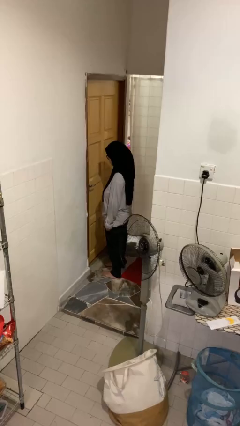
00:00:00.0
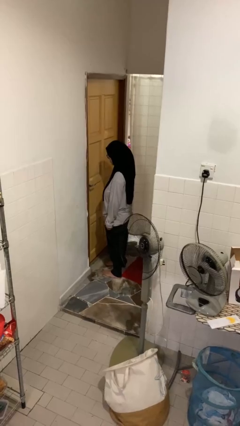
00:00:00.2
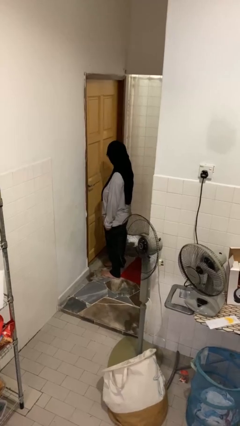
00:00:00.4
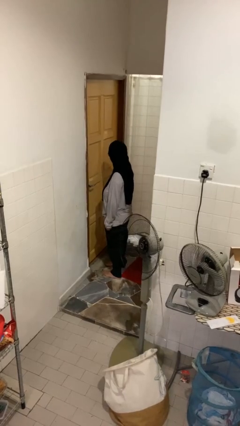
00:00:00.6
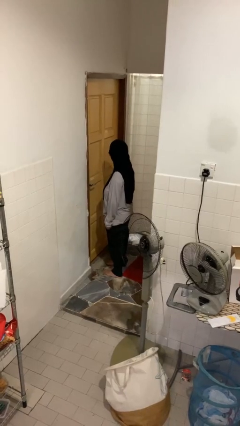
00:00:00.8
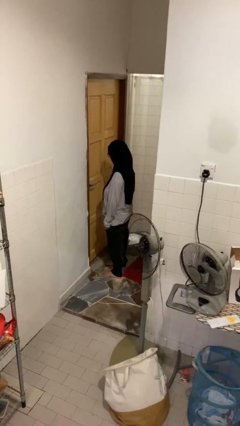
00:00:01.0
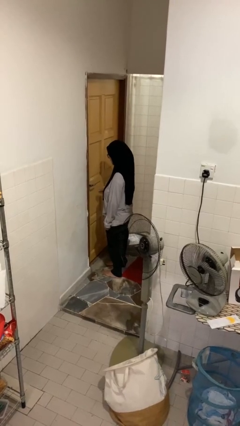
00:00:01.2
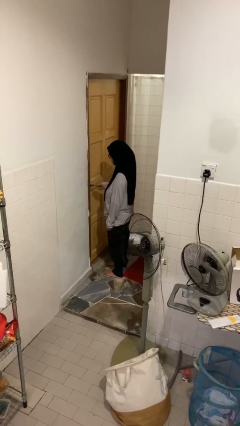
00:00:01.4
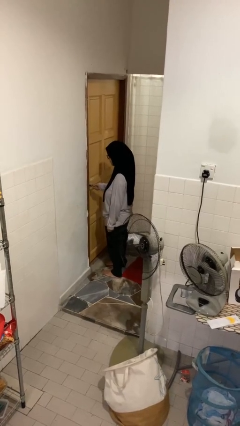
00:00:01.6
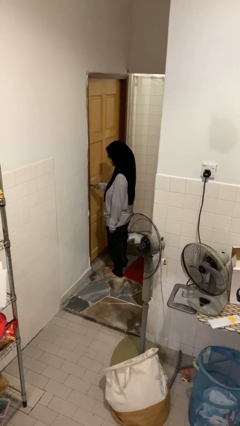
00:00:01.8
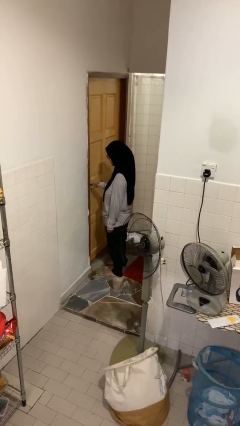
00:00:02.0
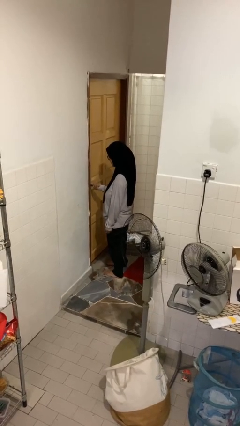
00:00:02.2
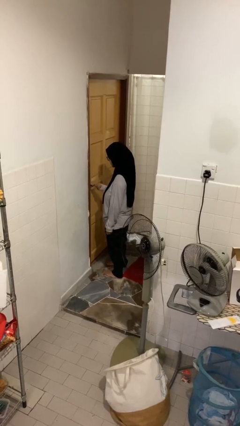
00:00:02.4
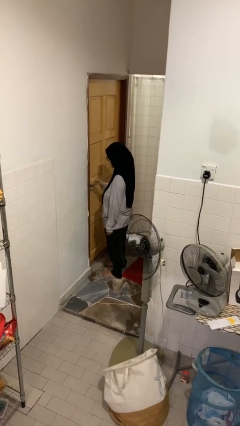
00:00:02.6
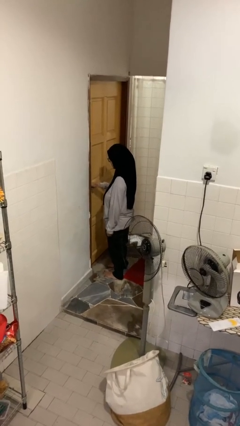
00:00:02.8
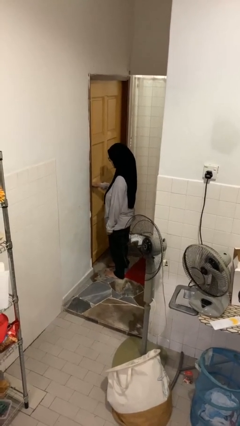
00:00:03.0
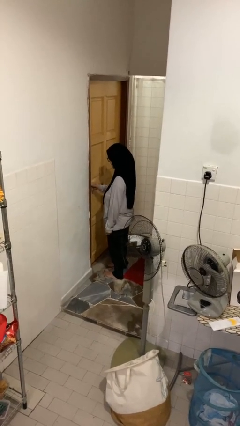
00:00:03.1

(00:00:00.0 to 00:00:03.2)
person unlocks door with keys

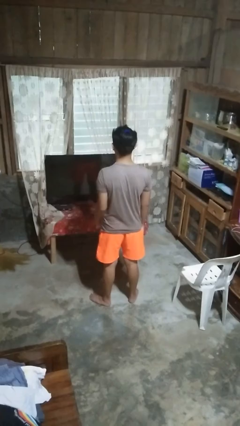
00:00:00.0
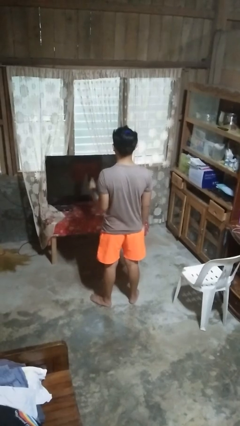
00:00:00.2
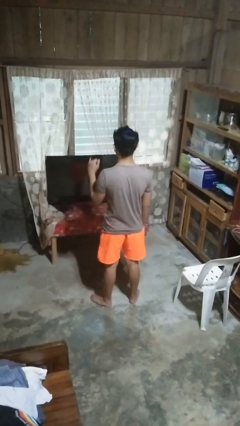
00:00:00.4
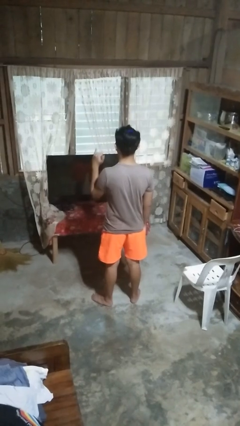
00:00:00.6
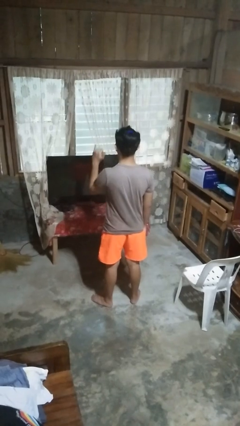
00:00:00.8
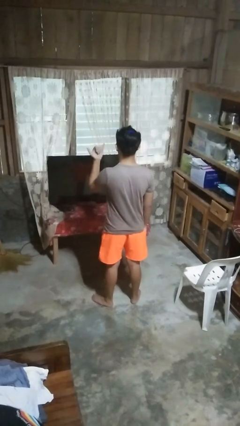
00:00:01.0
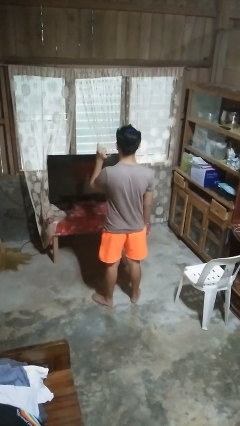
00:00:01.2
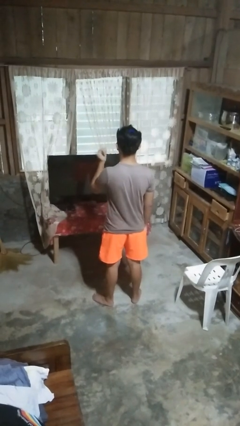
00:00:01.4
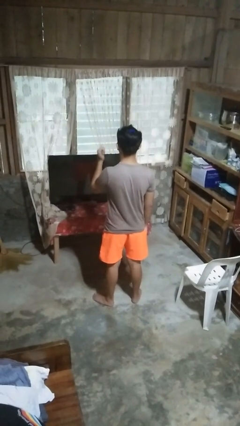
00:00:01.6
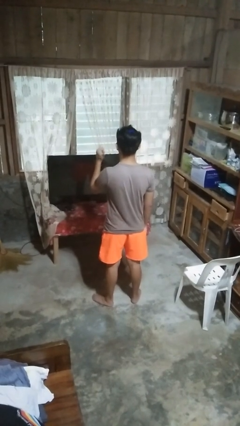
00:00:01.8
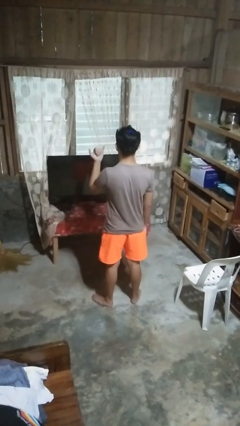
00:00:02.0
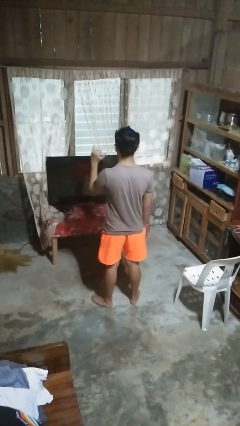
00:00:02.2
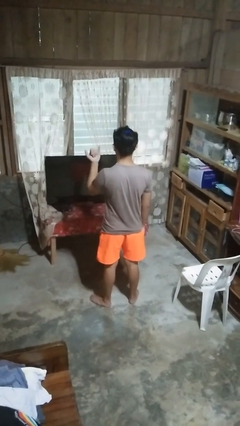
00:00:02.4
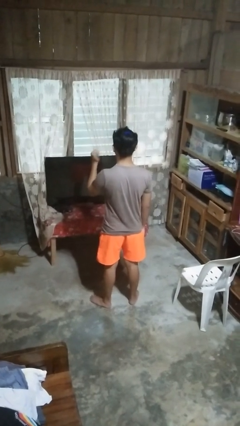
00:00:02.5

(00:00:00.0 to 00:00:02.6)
person gestures hang loose

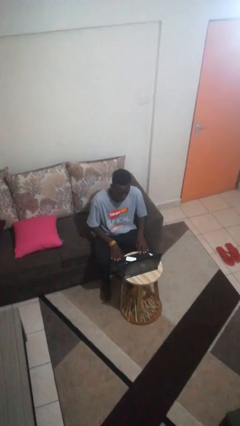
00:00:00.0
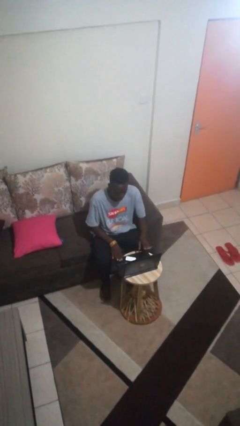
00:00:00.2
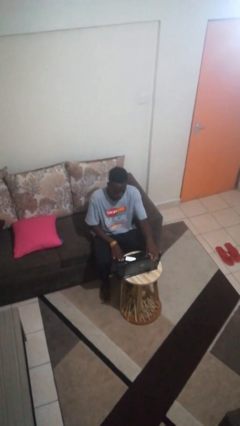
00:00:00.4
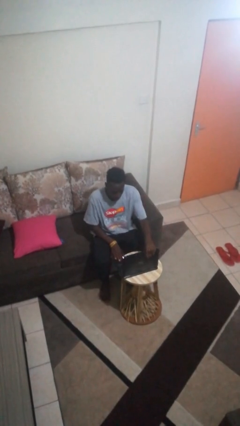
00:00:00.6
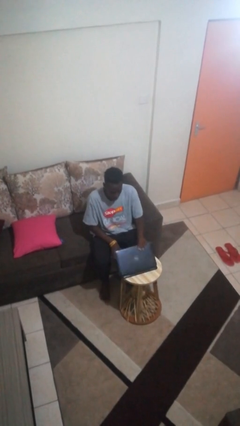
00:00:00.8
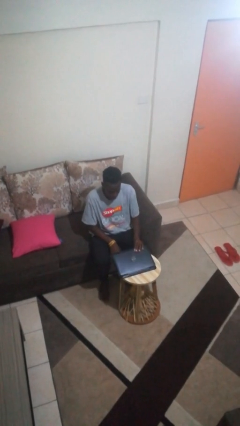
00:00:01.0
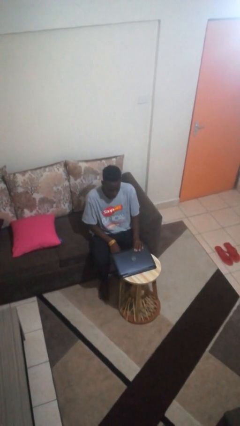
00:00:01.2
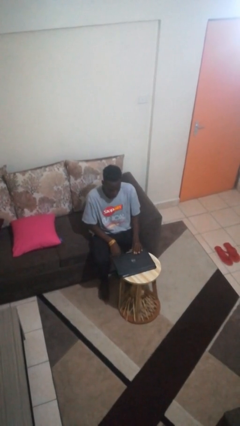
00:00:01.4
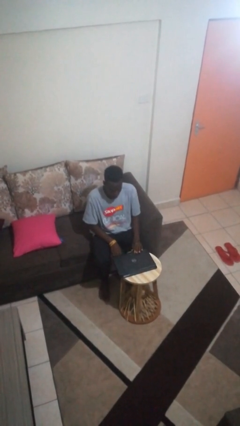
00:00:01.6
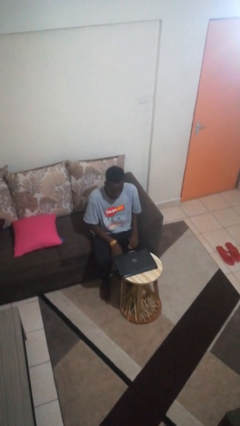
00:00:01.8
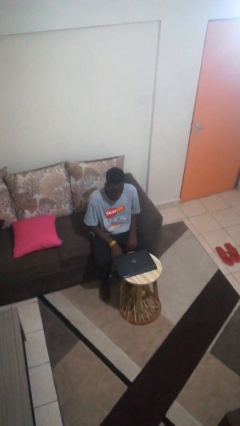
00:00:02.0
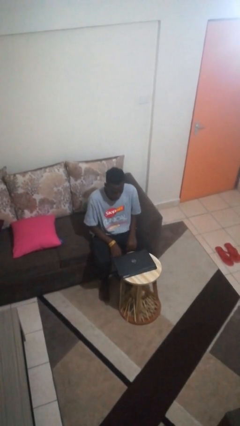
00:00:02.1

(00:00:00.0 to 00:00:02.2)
person closes laptop

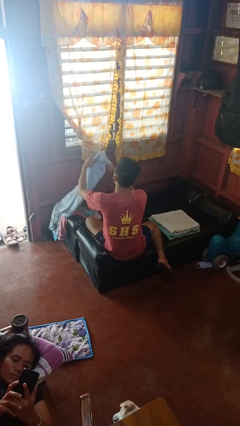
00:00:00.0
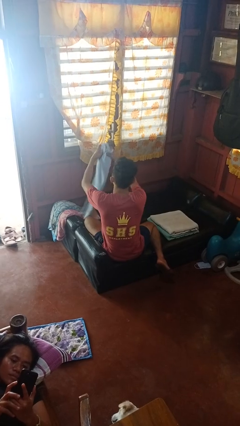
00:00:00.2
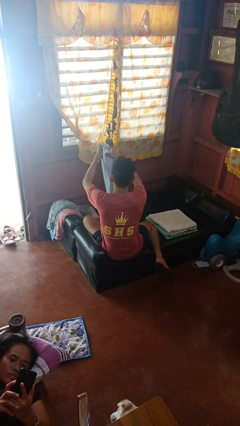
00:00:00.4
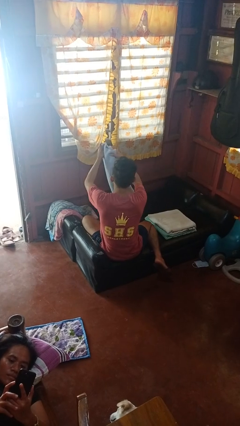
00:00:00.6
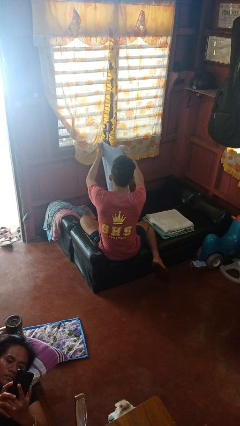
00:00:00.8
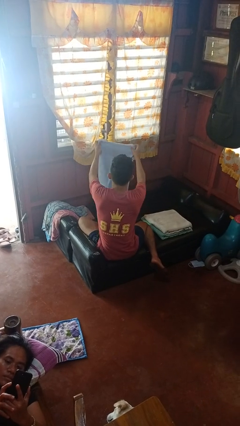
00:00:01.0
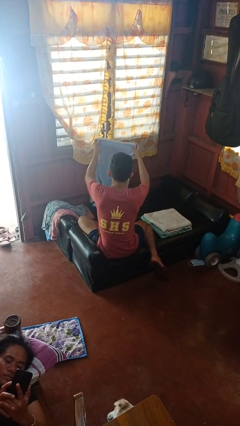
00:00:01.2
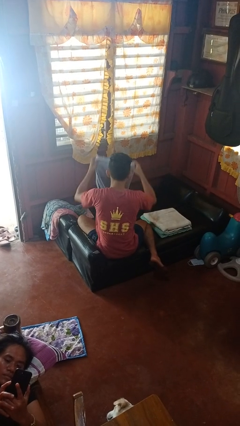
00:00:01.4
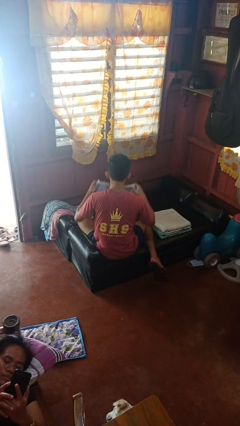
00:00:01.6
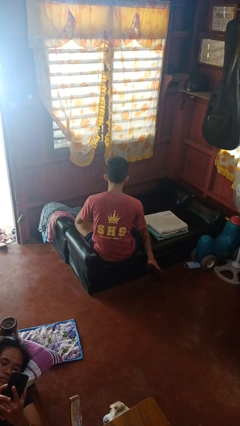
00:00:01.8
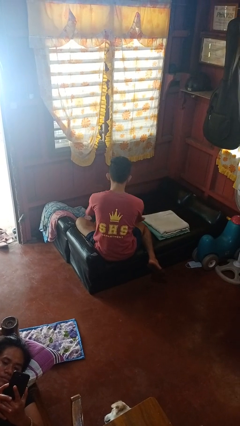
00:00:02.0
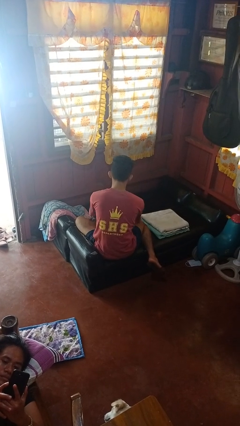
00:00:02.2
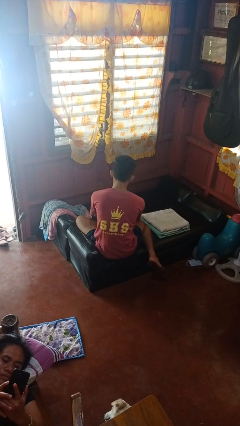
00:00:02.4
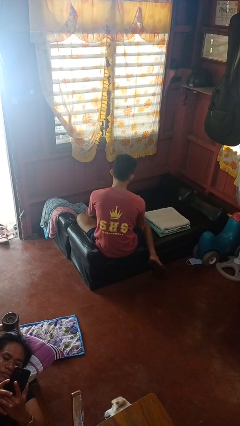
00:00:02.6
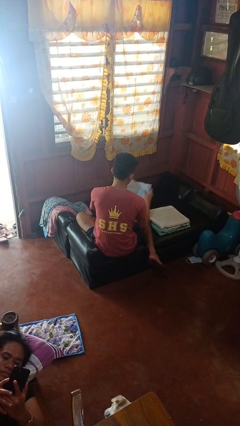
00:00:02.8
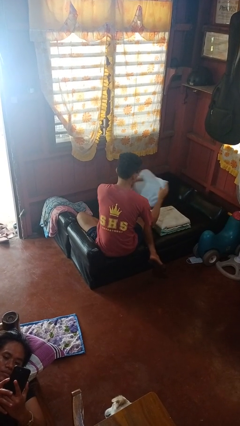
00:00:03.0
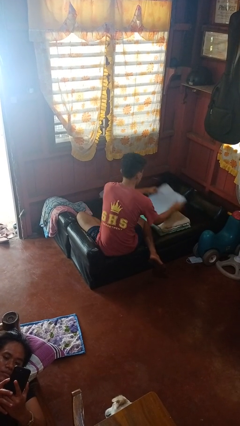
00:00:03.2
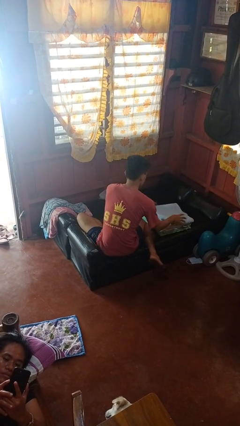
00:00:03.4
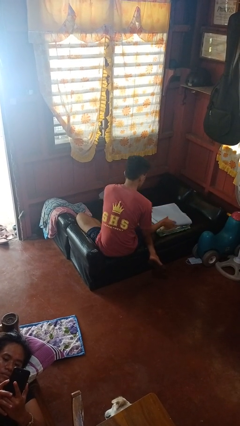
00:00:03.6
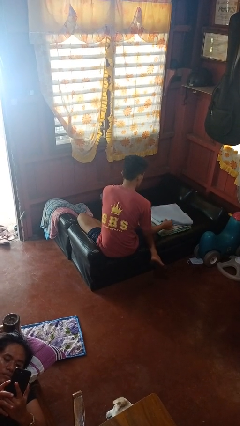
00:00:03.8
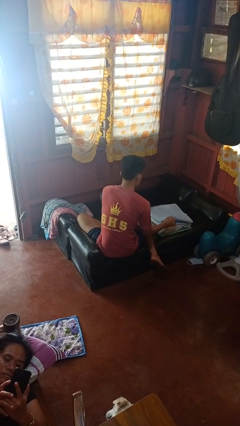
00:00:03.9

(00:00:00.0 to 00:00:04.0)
person folds towel

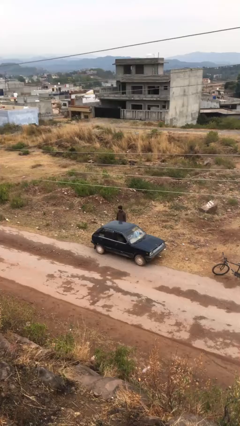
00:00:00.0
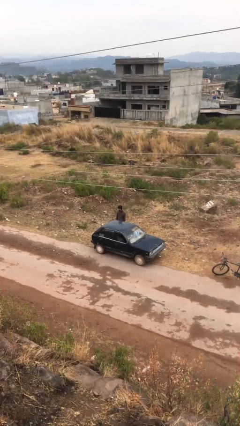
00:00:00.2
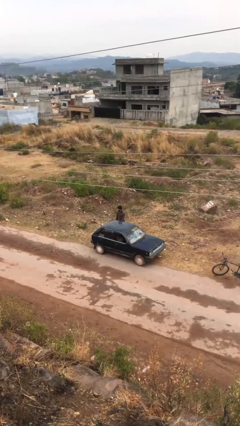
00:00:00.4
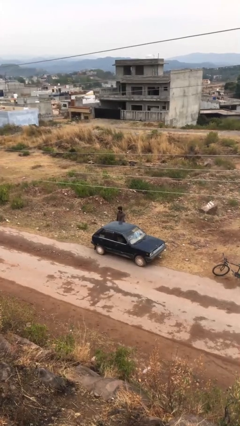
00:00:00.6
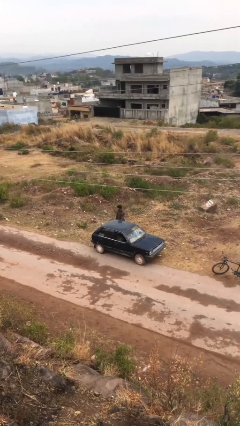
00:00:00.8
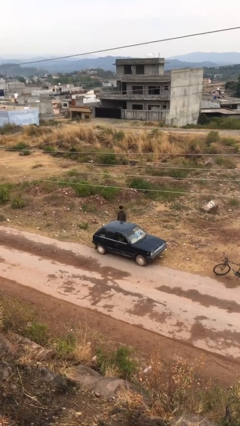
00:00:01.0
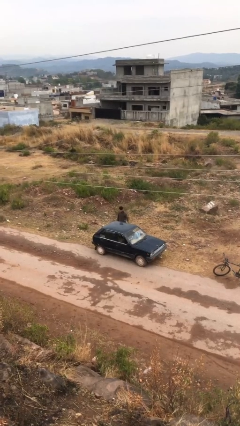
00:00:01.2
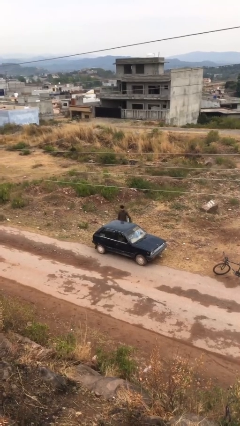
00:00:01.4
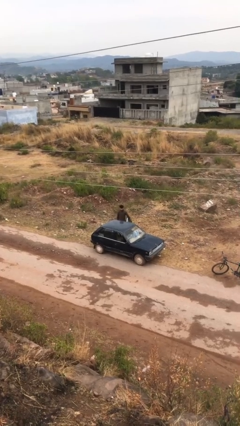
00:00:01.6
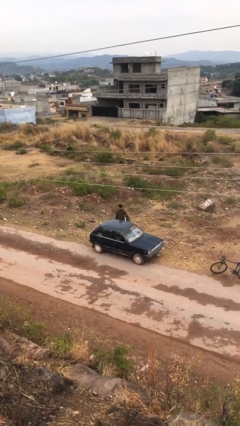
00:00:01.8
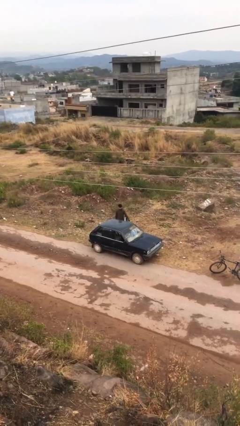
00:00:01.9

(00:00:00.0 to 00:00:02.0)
person opens car door

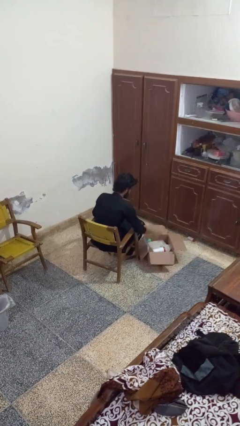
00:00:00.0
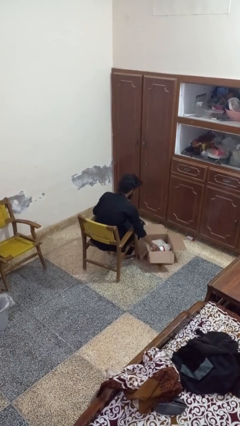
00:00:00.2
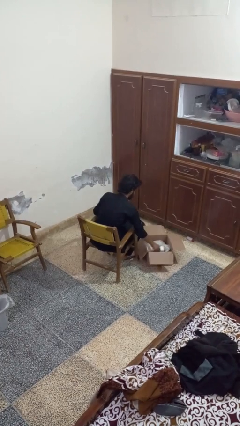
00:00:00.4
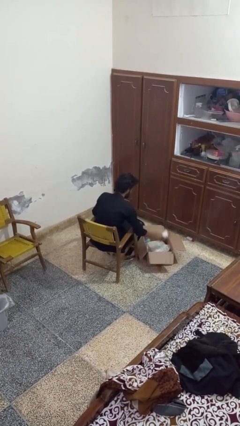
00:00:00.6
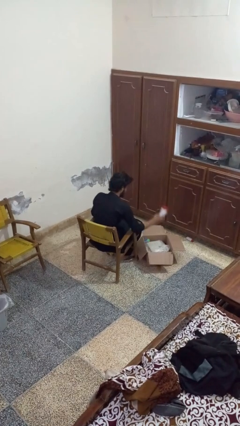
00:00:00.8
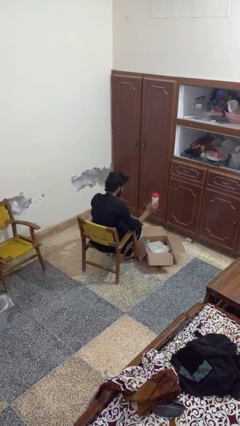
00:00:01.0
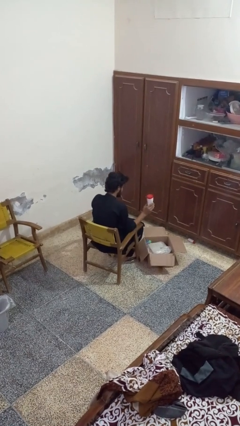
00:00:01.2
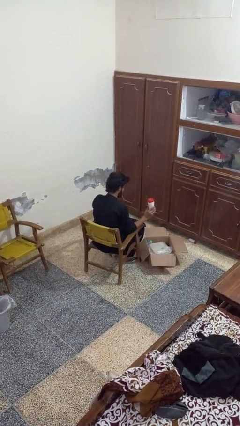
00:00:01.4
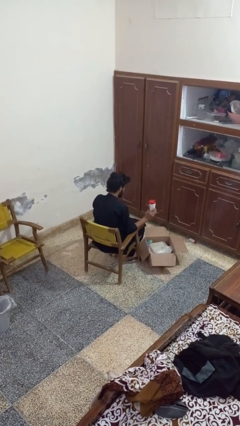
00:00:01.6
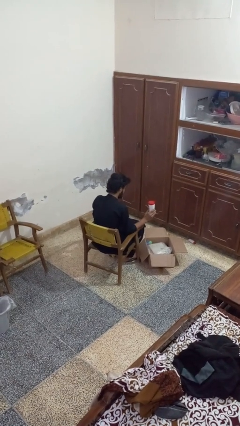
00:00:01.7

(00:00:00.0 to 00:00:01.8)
person takes object from box

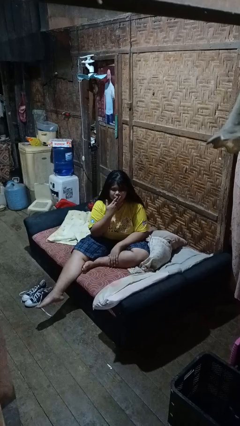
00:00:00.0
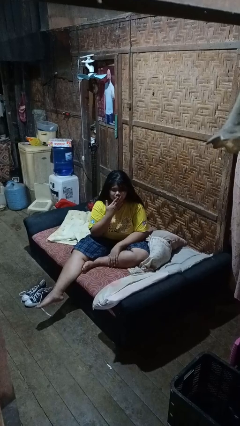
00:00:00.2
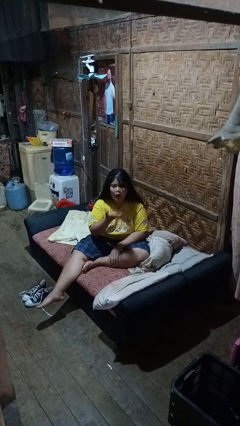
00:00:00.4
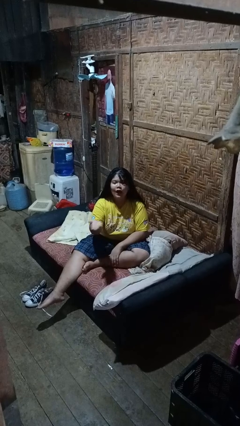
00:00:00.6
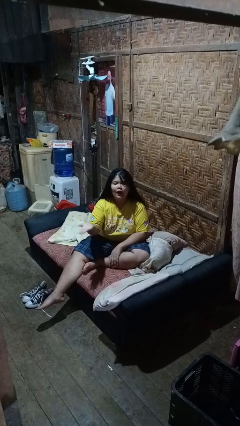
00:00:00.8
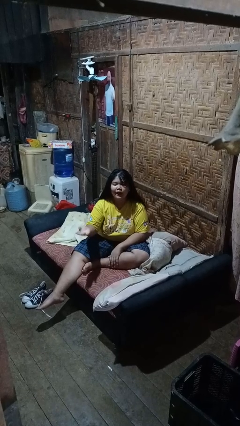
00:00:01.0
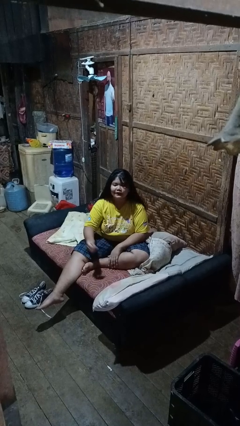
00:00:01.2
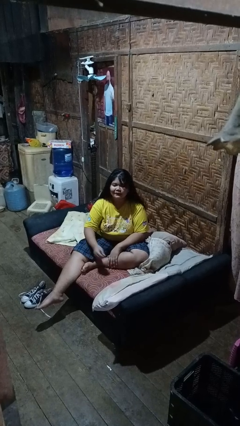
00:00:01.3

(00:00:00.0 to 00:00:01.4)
person gestures blow kiss
